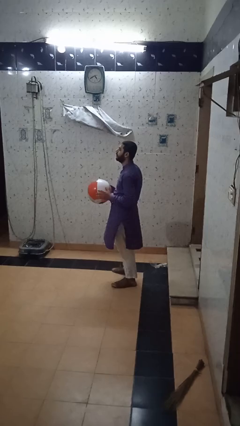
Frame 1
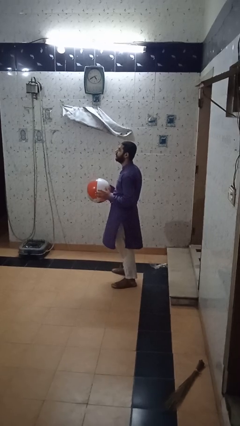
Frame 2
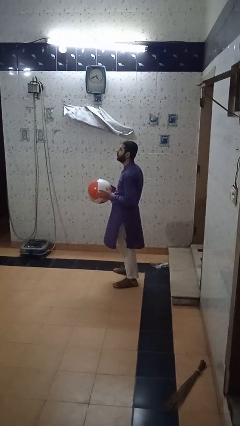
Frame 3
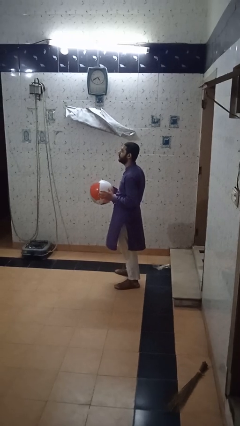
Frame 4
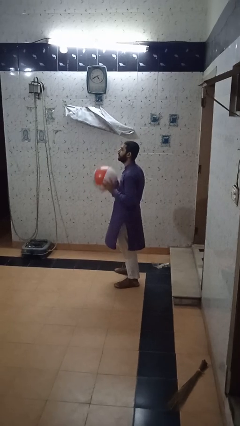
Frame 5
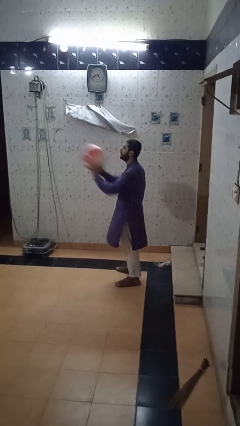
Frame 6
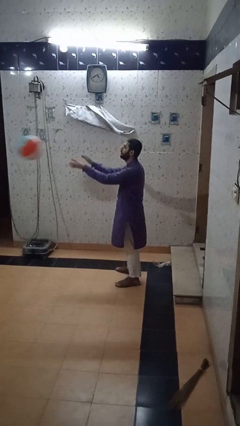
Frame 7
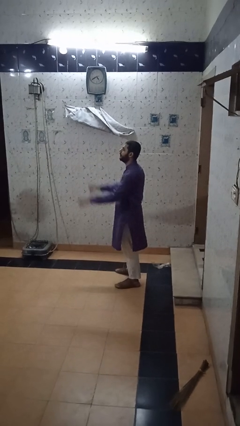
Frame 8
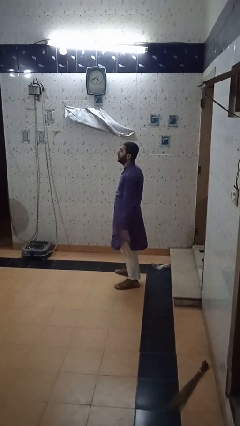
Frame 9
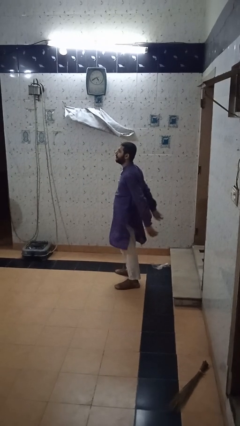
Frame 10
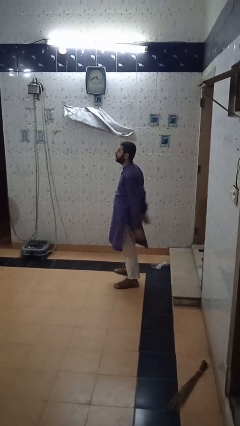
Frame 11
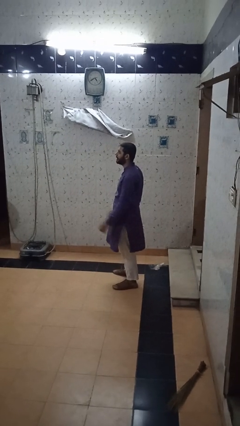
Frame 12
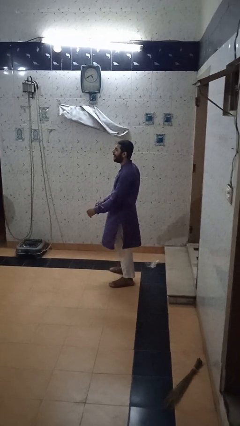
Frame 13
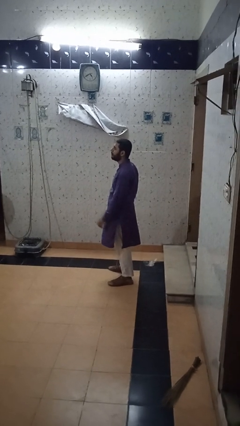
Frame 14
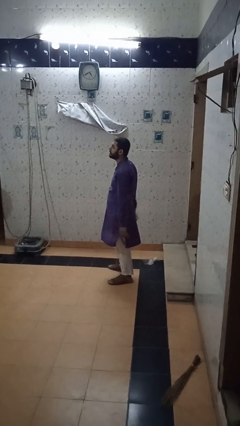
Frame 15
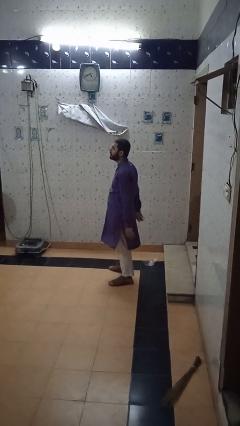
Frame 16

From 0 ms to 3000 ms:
person throws object to person

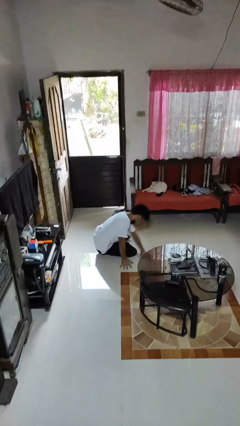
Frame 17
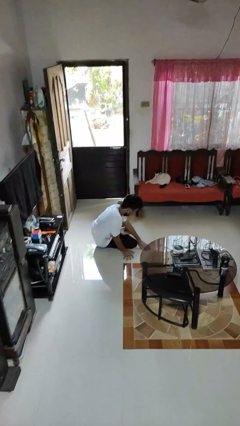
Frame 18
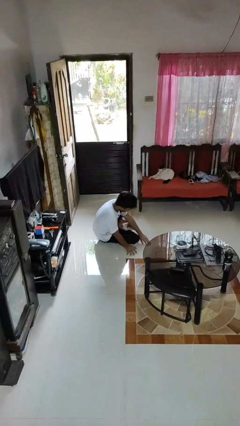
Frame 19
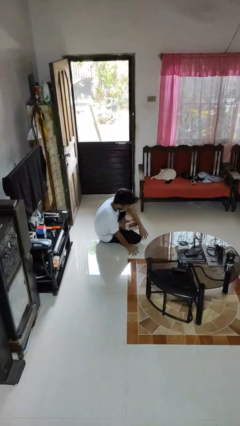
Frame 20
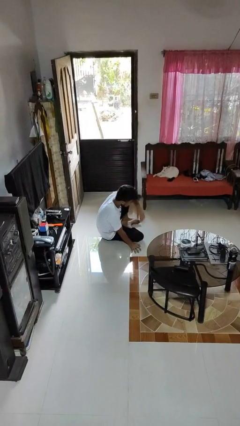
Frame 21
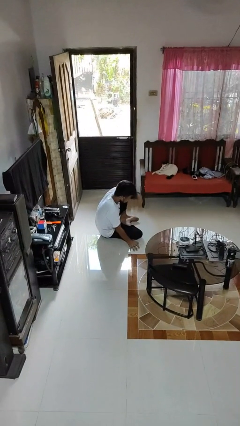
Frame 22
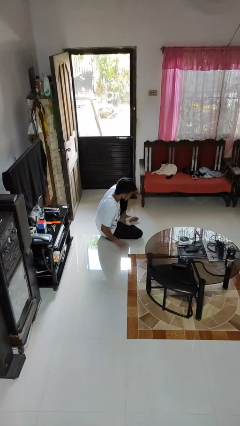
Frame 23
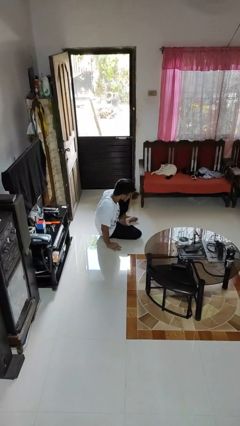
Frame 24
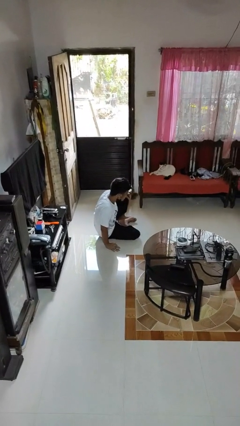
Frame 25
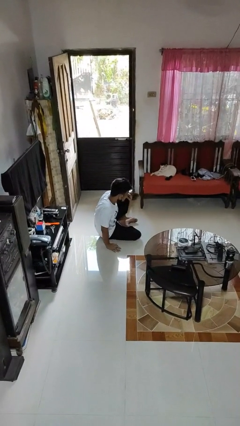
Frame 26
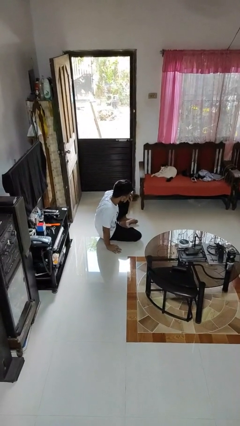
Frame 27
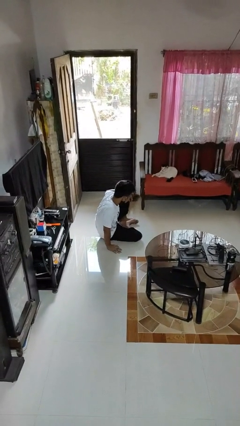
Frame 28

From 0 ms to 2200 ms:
person lies down on floor

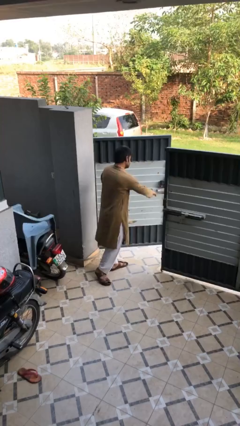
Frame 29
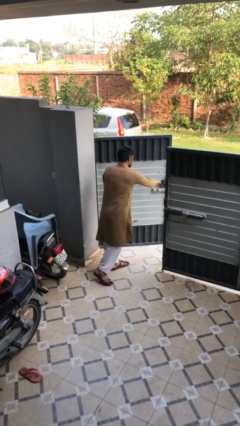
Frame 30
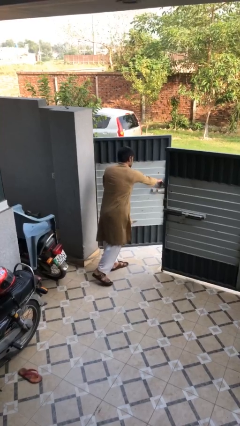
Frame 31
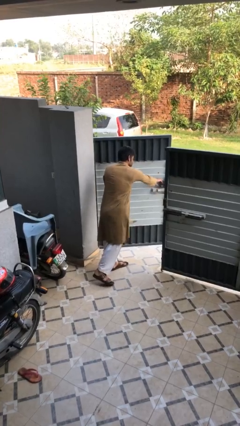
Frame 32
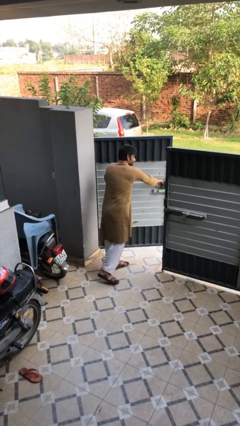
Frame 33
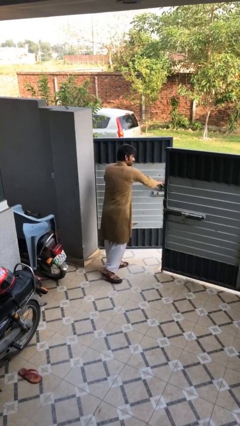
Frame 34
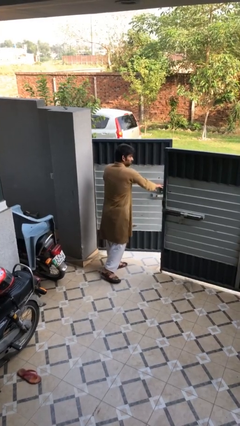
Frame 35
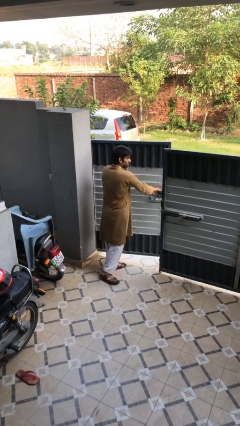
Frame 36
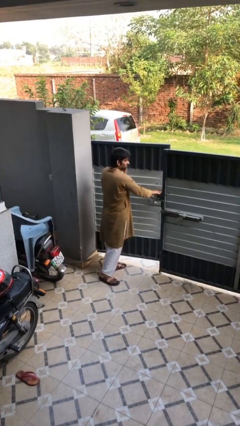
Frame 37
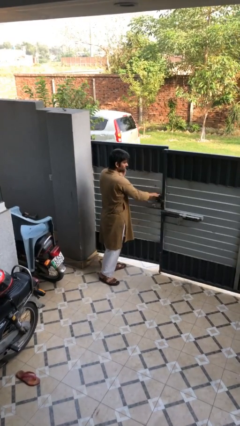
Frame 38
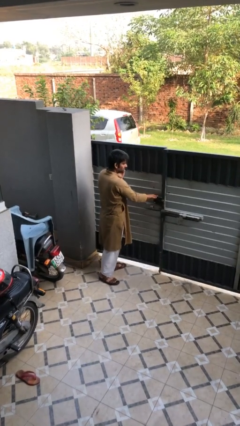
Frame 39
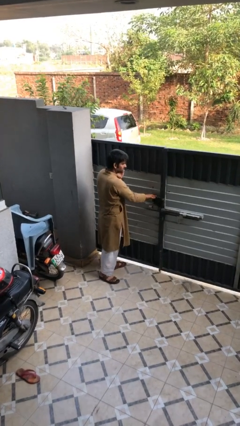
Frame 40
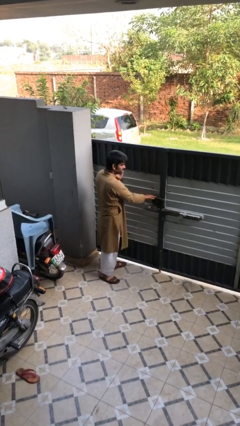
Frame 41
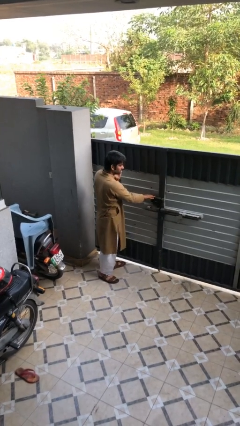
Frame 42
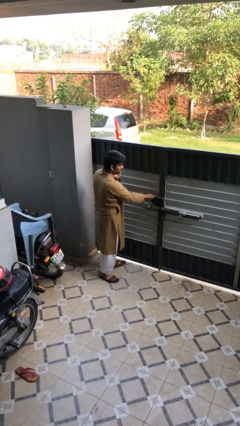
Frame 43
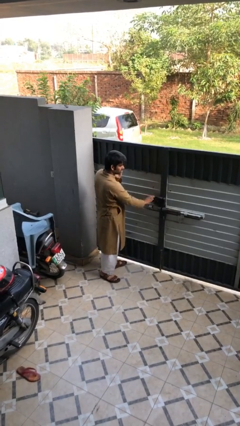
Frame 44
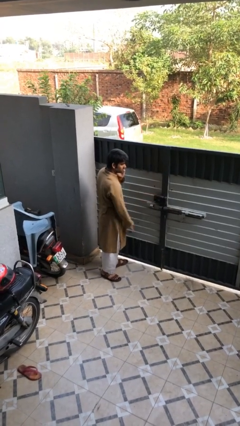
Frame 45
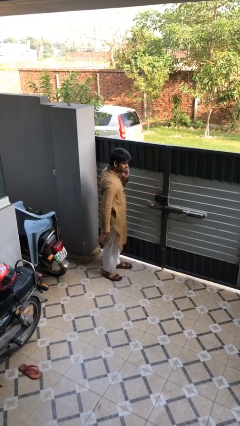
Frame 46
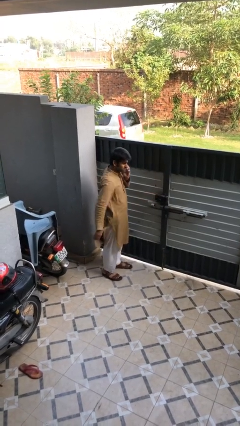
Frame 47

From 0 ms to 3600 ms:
person closes facility door

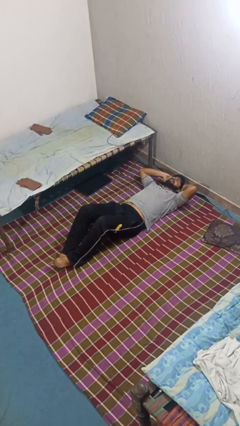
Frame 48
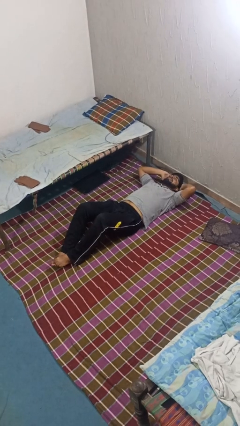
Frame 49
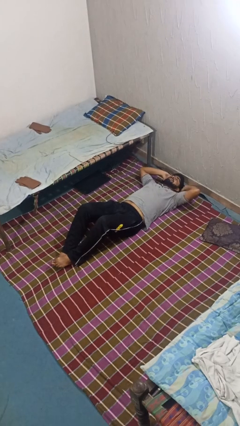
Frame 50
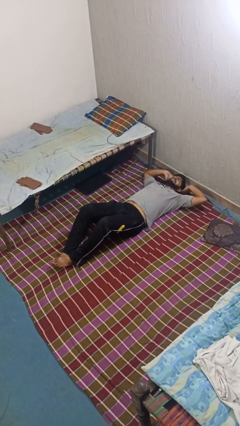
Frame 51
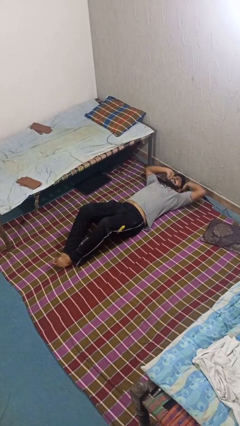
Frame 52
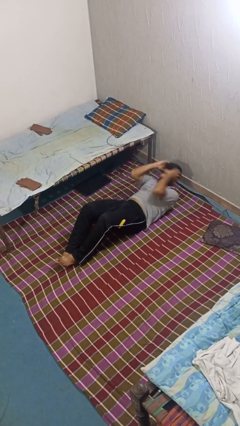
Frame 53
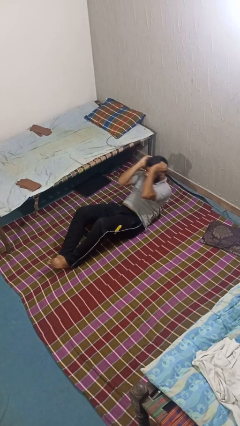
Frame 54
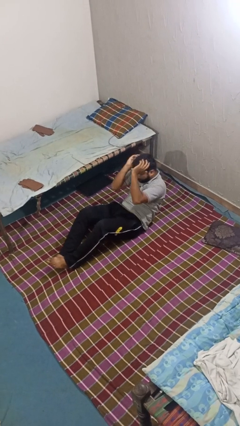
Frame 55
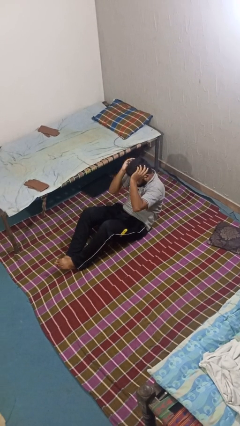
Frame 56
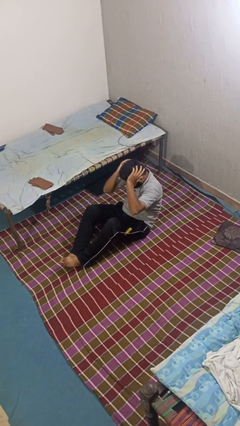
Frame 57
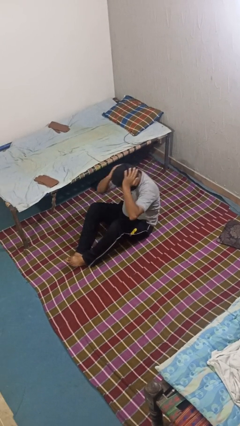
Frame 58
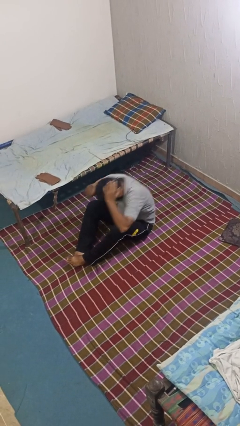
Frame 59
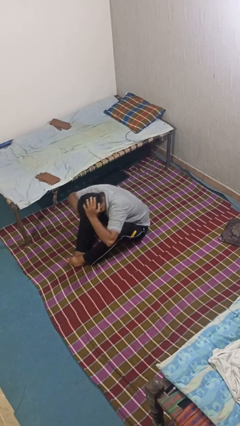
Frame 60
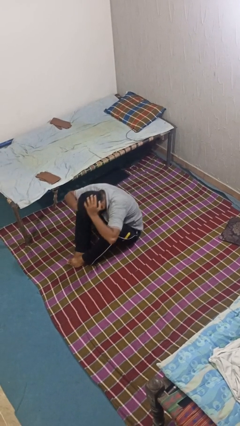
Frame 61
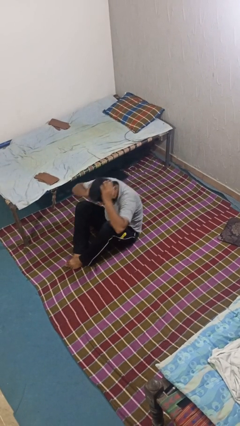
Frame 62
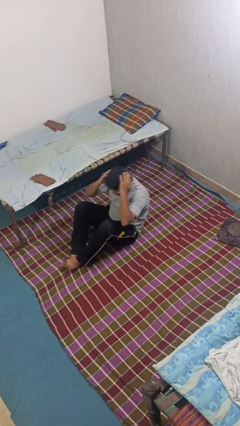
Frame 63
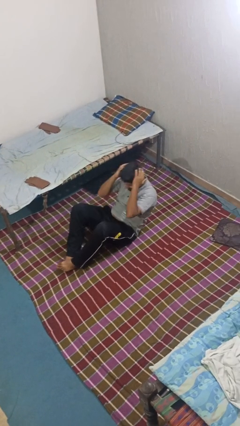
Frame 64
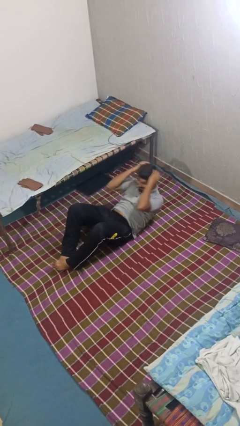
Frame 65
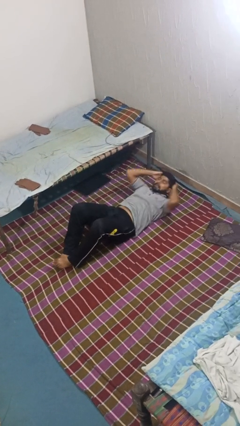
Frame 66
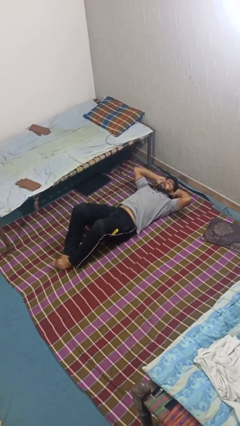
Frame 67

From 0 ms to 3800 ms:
person exercises with situp

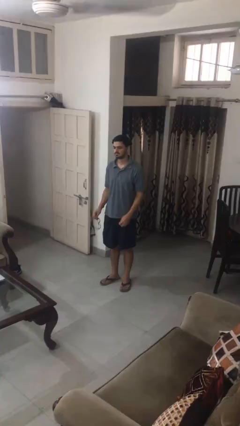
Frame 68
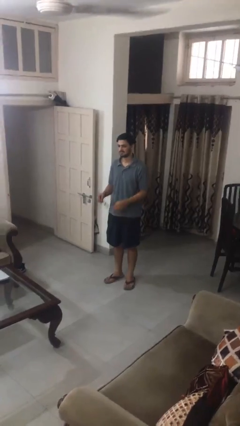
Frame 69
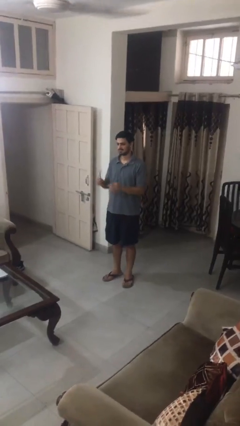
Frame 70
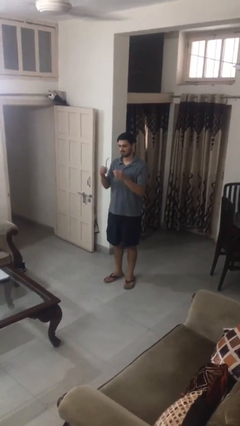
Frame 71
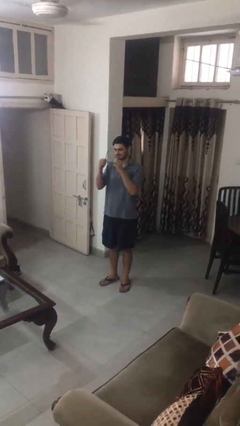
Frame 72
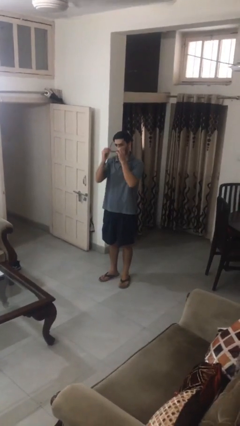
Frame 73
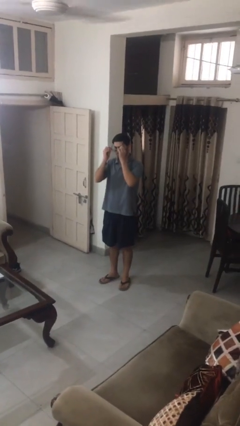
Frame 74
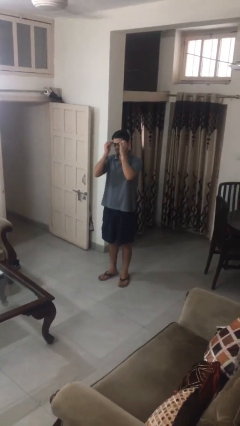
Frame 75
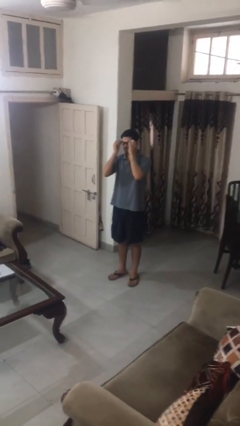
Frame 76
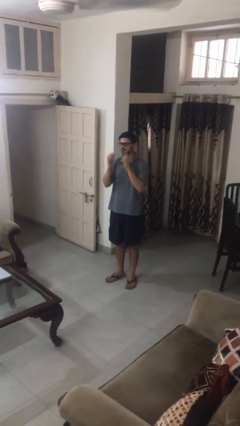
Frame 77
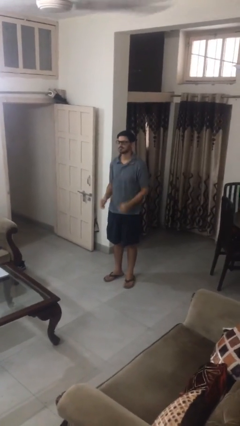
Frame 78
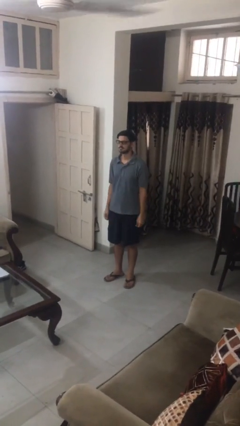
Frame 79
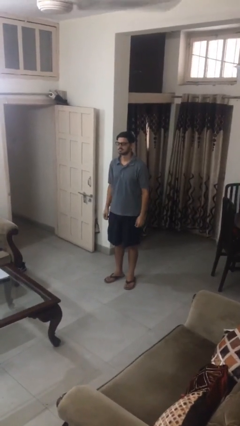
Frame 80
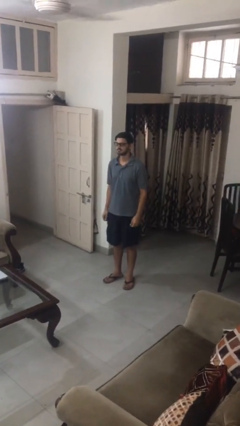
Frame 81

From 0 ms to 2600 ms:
person puts on glasses

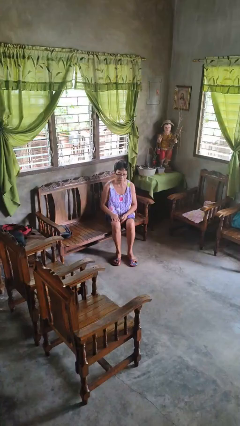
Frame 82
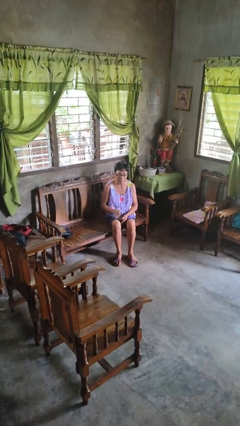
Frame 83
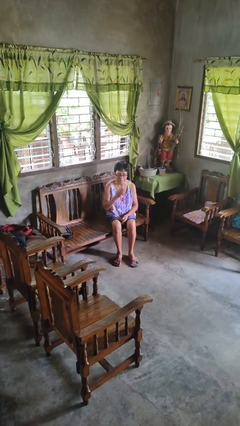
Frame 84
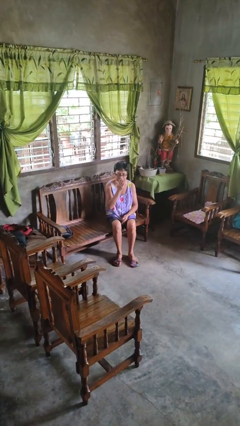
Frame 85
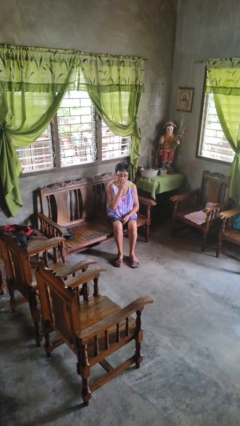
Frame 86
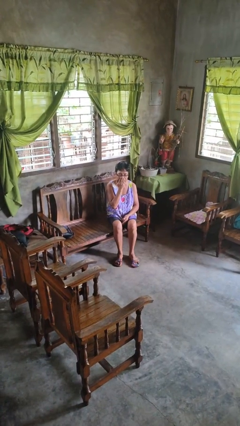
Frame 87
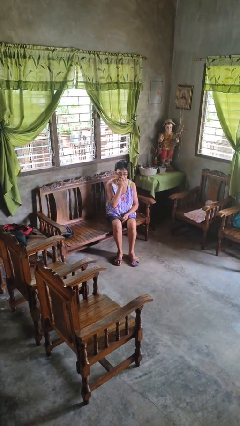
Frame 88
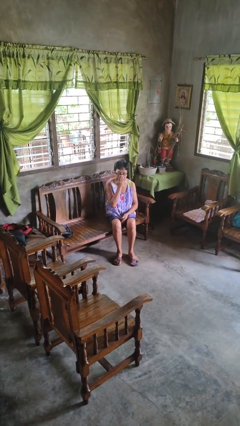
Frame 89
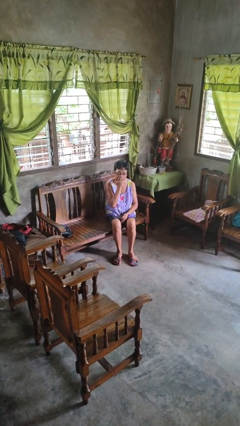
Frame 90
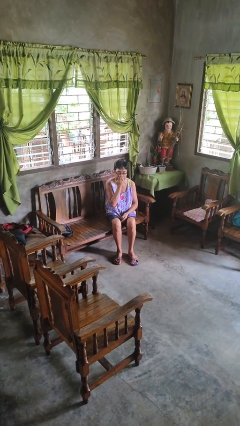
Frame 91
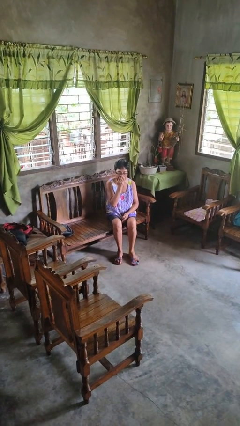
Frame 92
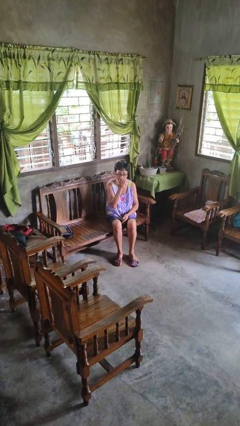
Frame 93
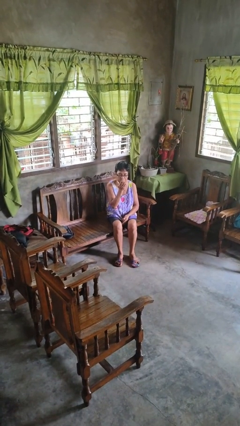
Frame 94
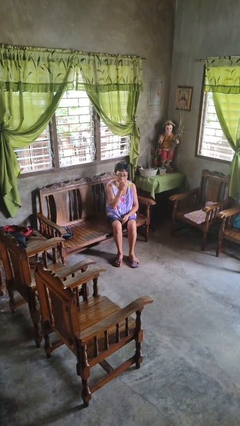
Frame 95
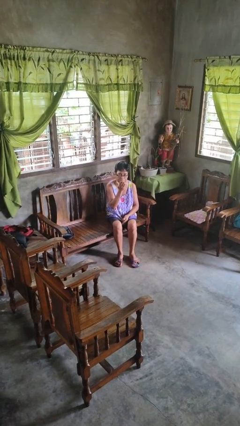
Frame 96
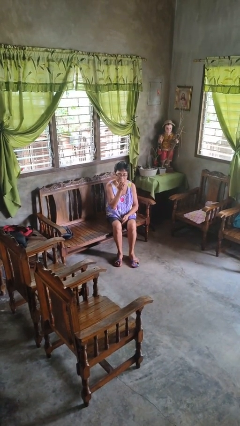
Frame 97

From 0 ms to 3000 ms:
person gestures blow kiss
